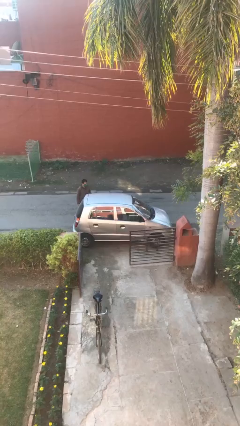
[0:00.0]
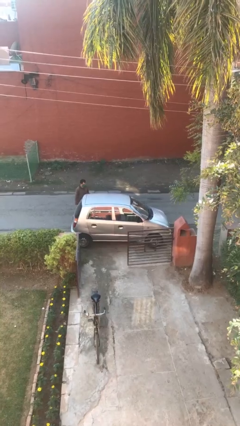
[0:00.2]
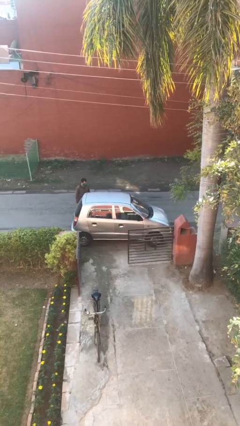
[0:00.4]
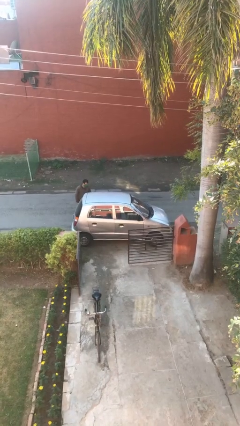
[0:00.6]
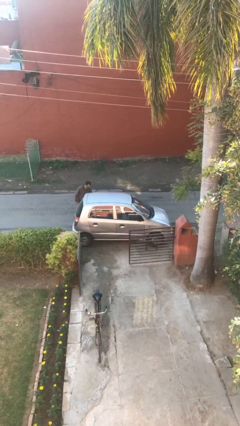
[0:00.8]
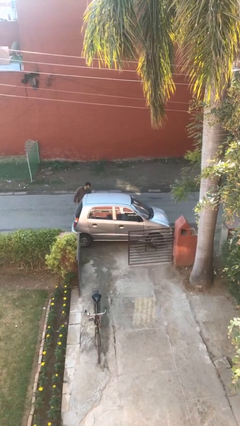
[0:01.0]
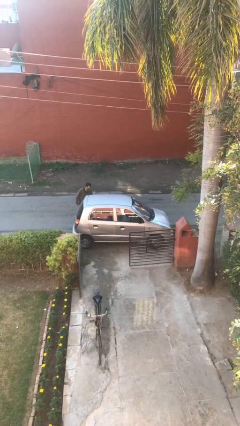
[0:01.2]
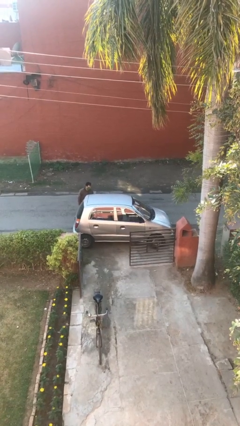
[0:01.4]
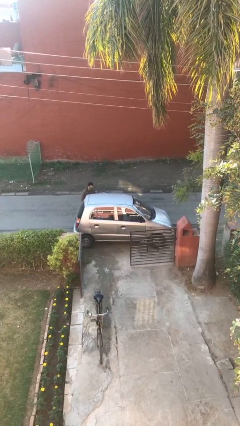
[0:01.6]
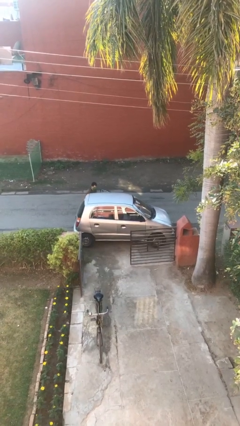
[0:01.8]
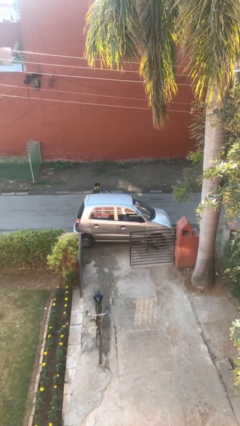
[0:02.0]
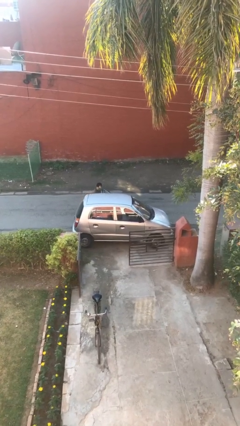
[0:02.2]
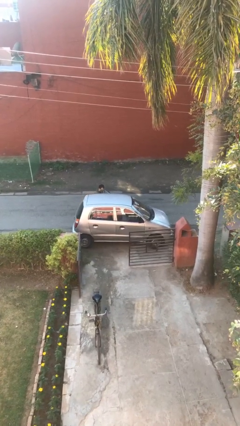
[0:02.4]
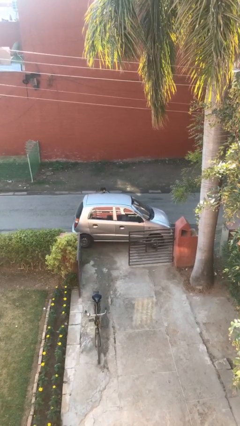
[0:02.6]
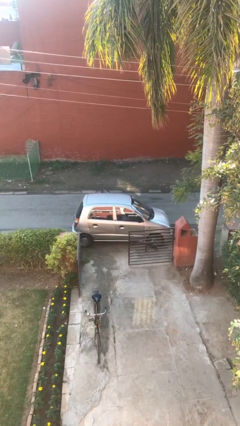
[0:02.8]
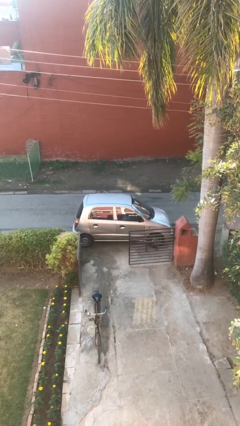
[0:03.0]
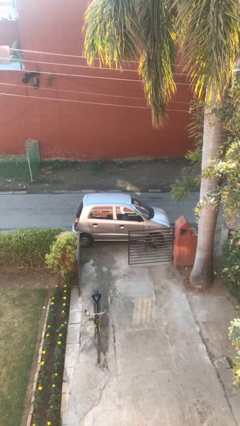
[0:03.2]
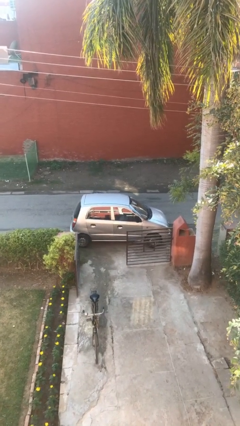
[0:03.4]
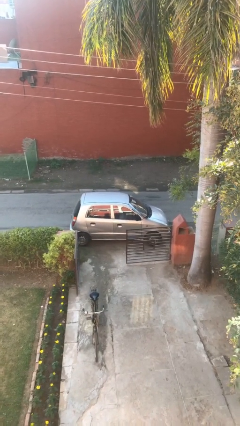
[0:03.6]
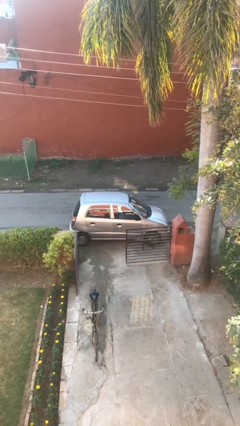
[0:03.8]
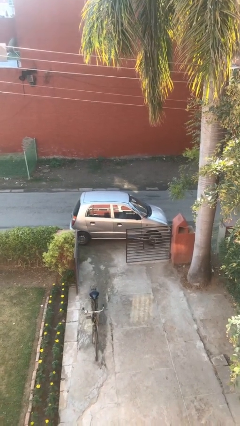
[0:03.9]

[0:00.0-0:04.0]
car picks up person

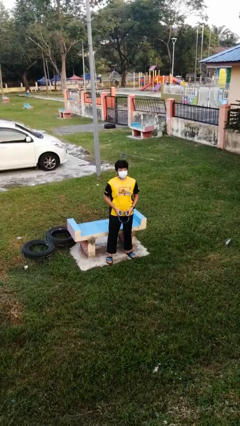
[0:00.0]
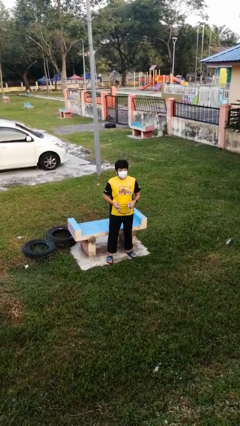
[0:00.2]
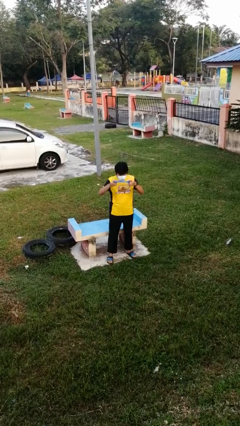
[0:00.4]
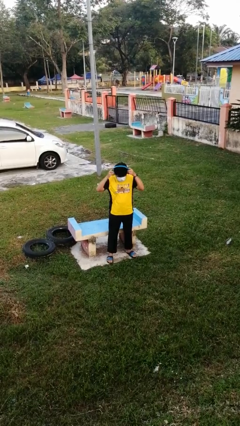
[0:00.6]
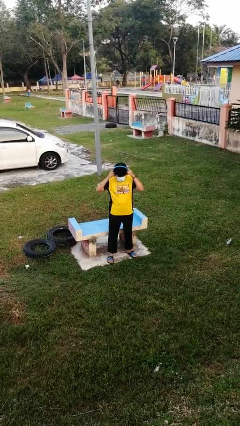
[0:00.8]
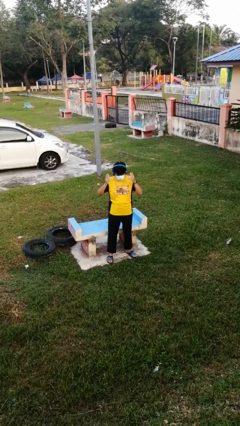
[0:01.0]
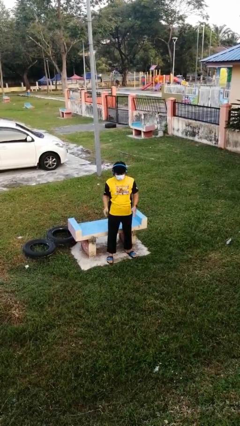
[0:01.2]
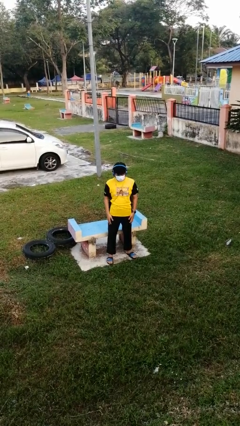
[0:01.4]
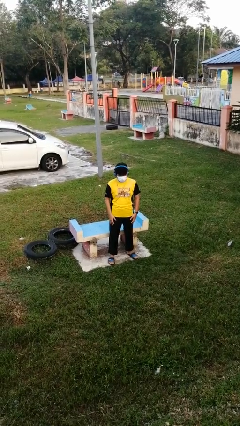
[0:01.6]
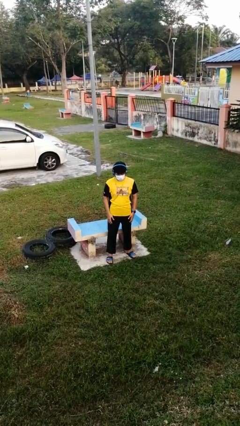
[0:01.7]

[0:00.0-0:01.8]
person puts on headphones

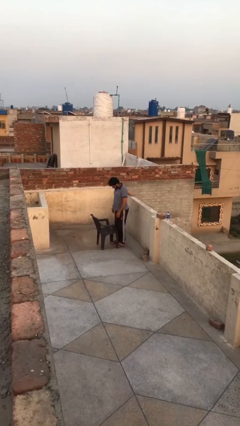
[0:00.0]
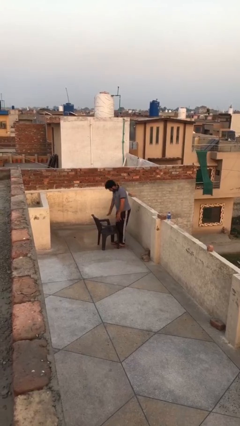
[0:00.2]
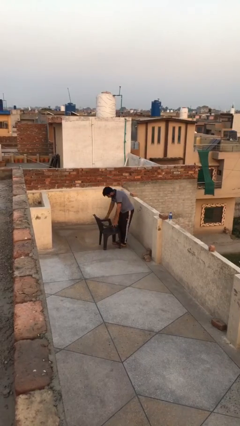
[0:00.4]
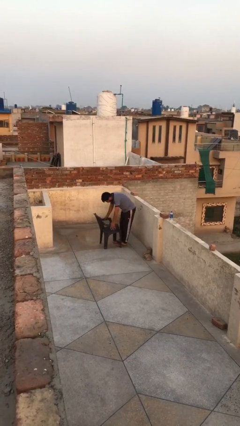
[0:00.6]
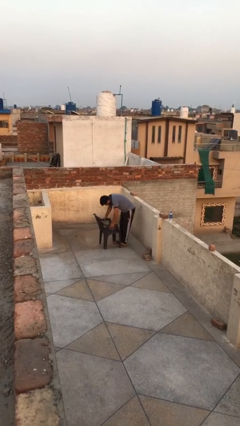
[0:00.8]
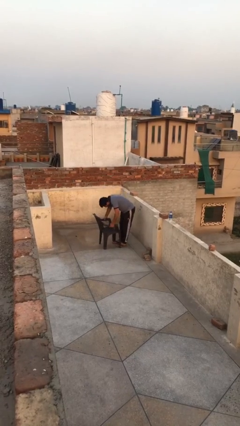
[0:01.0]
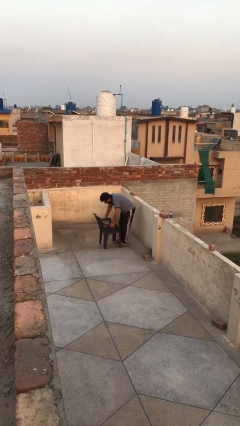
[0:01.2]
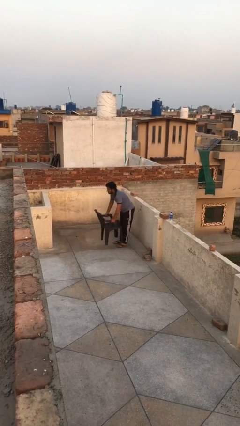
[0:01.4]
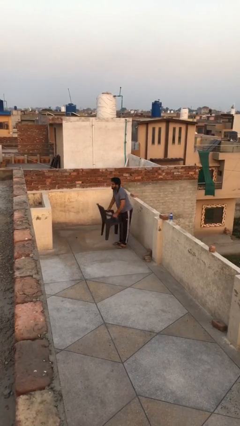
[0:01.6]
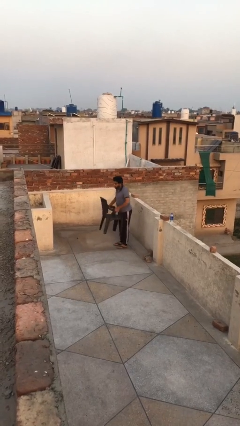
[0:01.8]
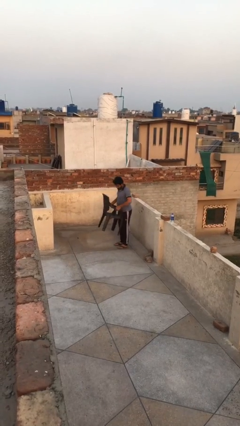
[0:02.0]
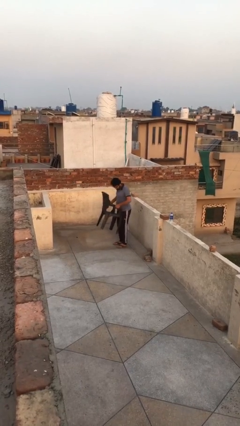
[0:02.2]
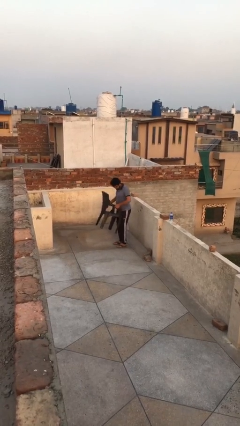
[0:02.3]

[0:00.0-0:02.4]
person picks up object from floor

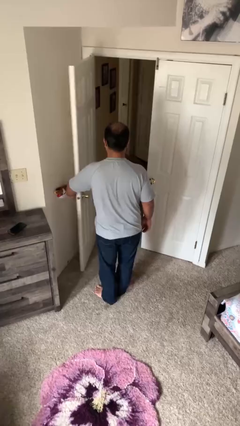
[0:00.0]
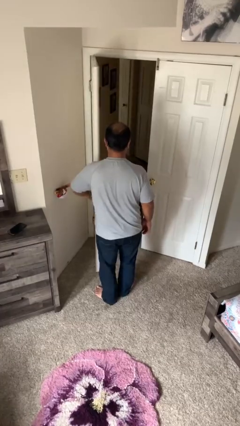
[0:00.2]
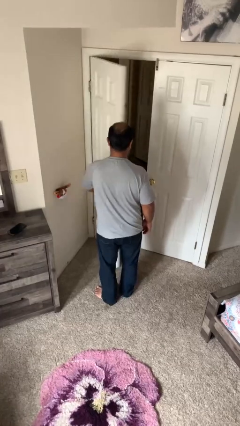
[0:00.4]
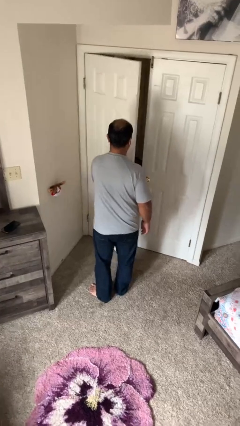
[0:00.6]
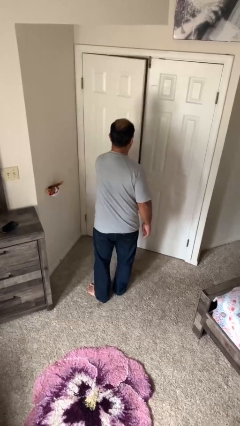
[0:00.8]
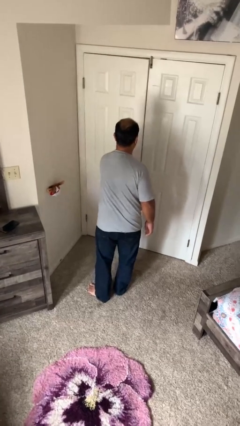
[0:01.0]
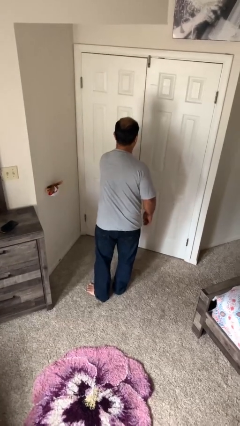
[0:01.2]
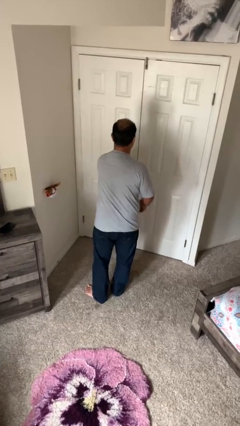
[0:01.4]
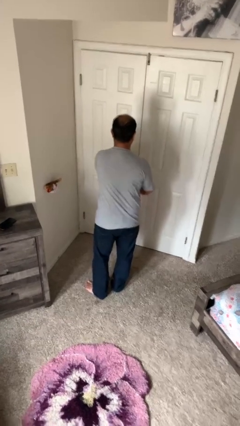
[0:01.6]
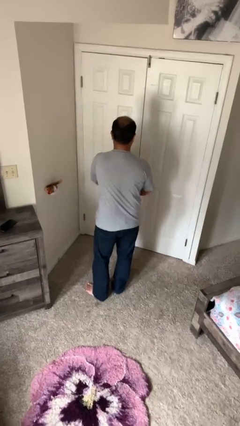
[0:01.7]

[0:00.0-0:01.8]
person closes facility door

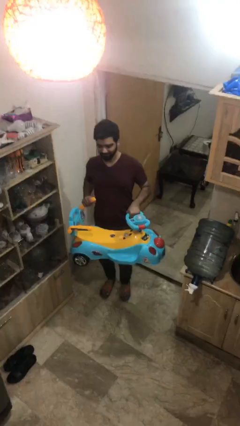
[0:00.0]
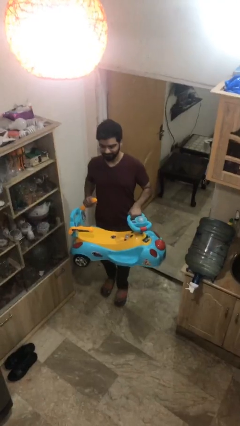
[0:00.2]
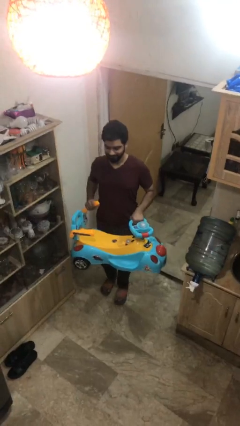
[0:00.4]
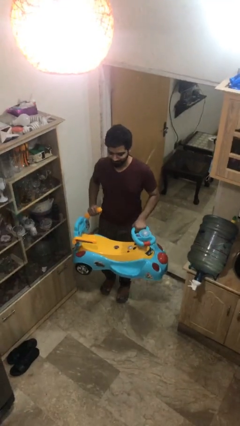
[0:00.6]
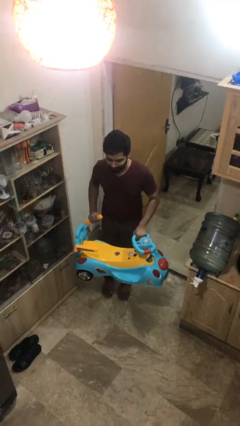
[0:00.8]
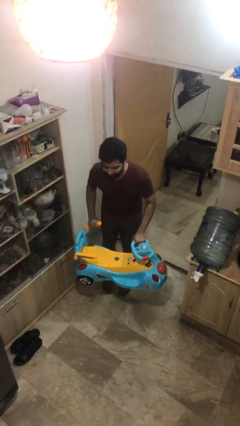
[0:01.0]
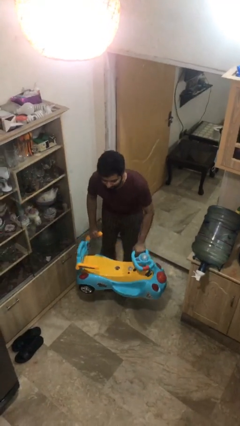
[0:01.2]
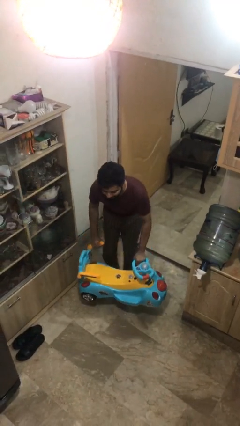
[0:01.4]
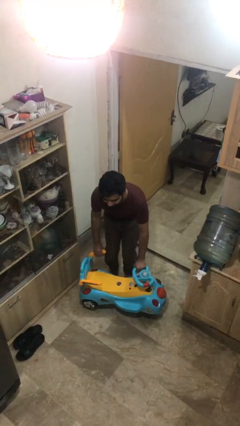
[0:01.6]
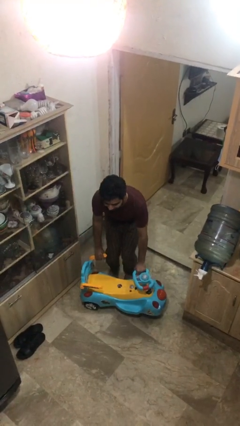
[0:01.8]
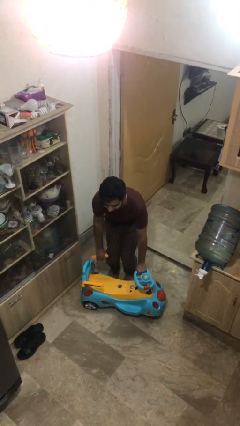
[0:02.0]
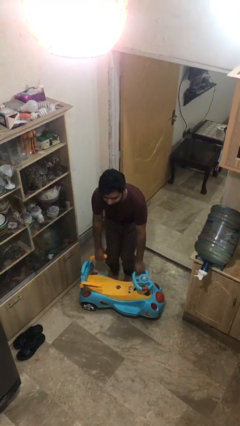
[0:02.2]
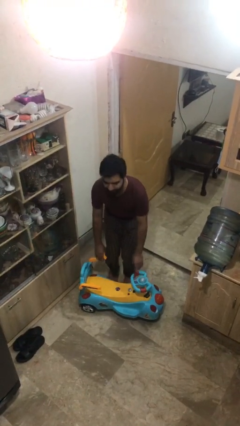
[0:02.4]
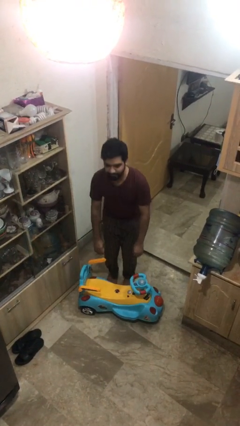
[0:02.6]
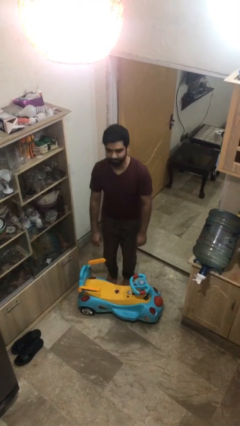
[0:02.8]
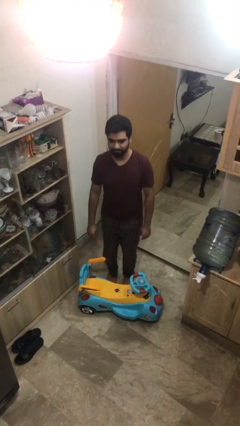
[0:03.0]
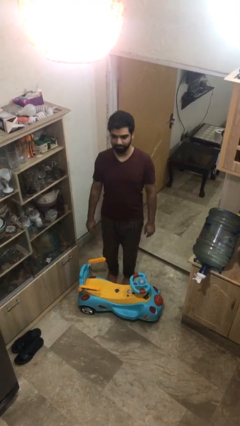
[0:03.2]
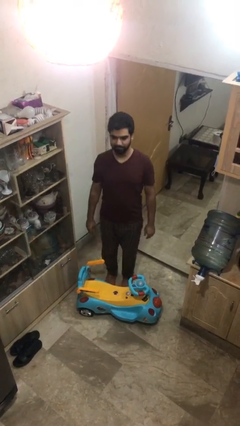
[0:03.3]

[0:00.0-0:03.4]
person puts down object on floor

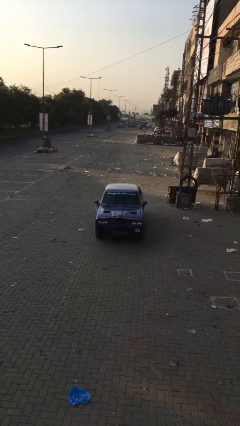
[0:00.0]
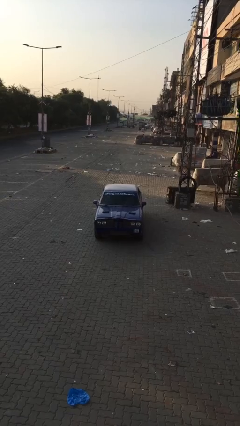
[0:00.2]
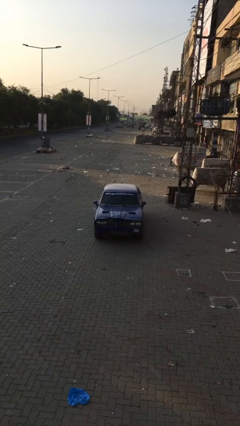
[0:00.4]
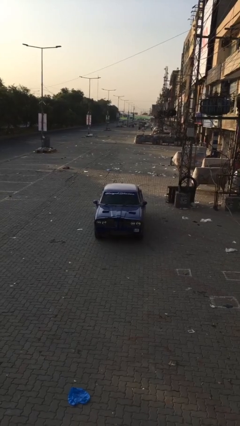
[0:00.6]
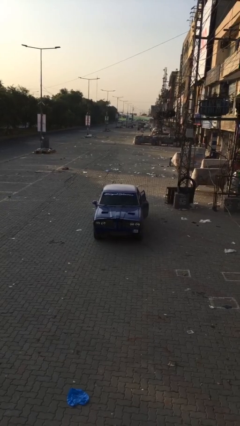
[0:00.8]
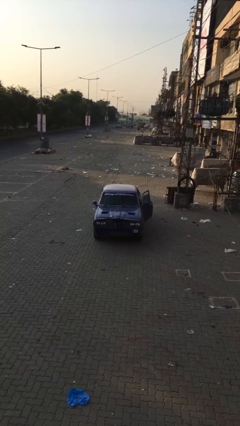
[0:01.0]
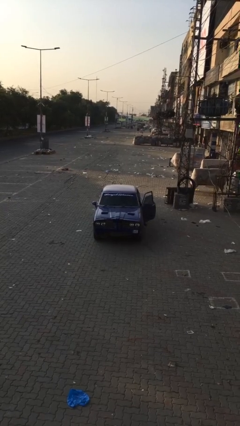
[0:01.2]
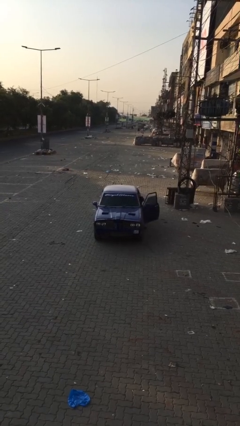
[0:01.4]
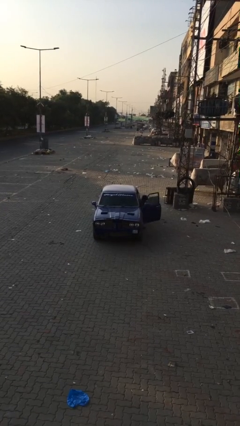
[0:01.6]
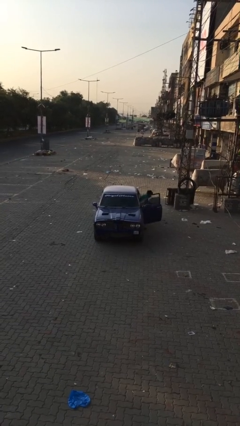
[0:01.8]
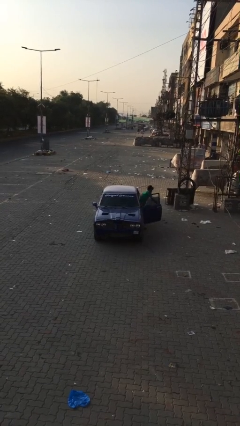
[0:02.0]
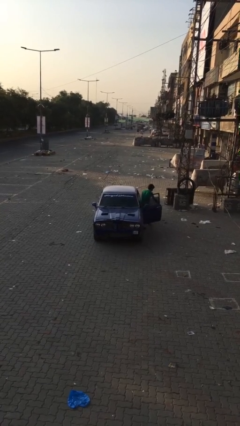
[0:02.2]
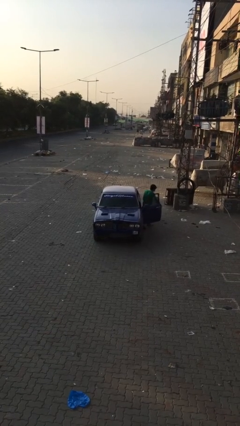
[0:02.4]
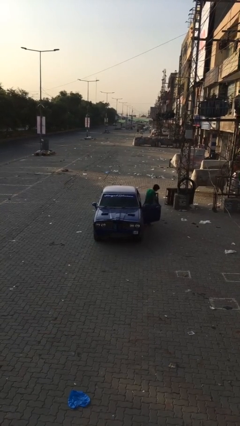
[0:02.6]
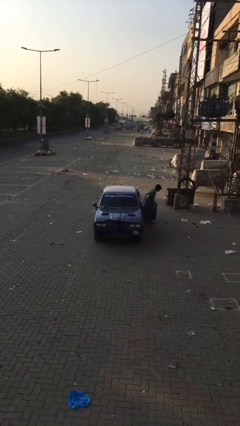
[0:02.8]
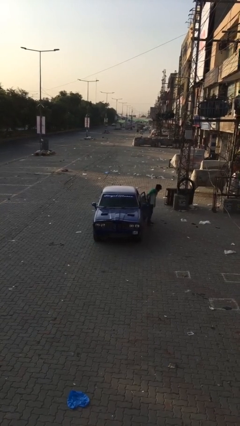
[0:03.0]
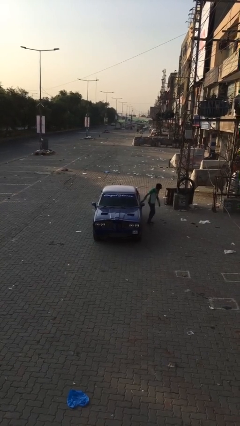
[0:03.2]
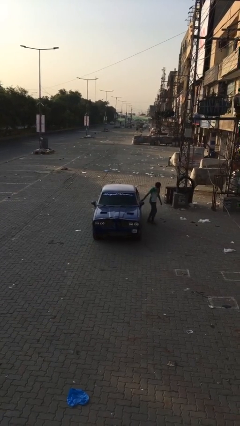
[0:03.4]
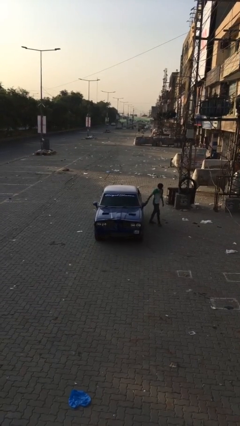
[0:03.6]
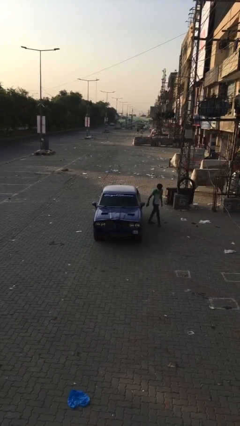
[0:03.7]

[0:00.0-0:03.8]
car drops off person
